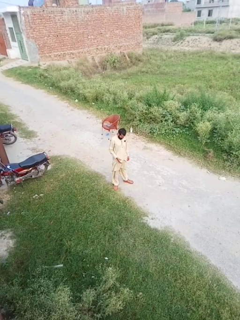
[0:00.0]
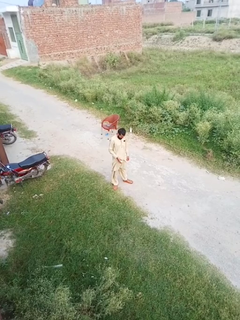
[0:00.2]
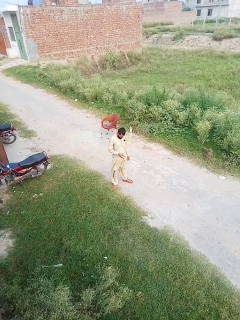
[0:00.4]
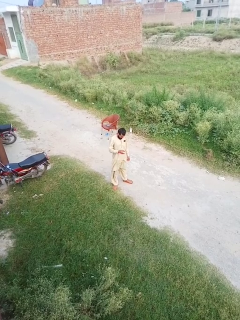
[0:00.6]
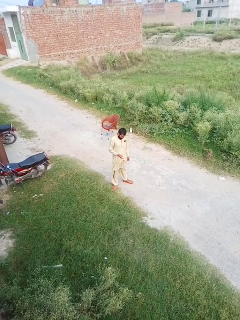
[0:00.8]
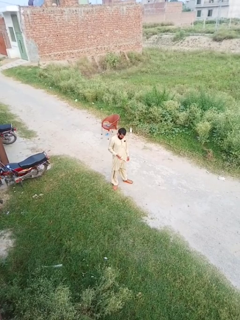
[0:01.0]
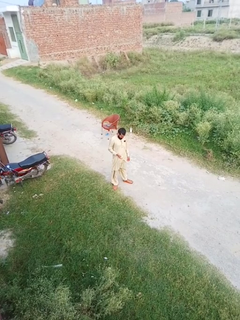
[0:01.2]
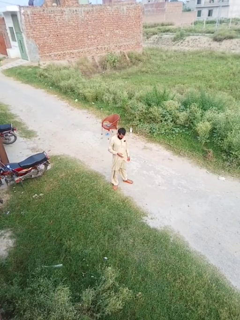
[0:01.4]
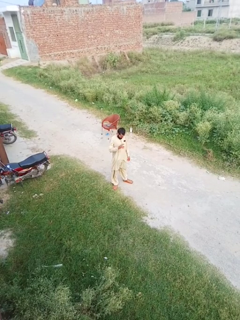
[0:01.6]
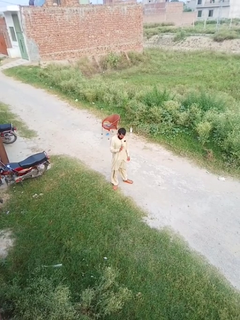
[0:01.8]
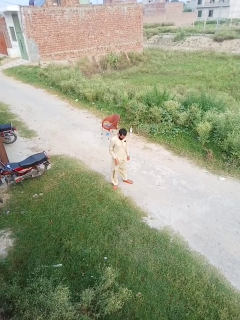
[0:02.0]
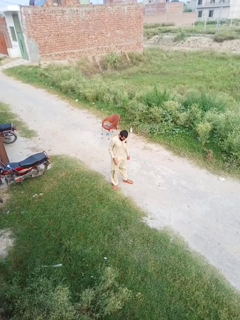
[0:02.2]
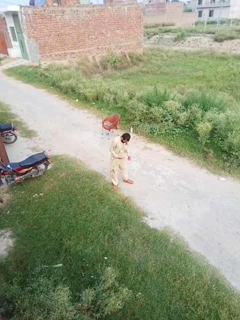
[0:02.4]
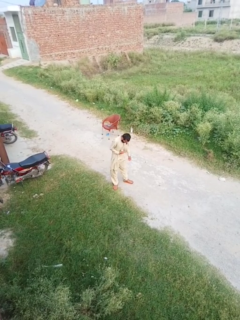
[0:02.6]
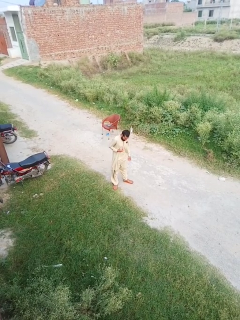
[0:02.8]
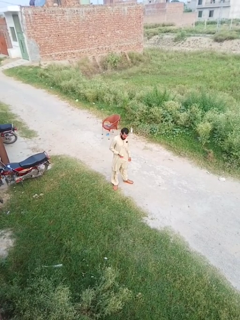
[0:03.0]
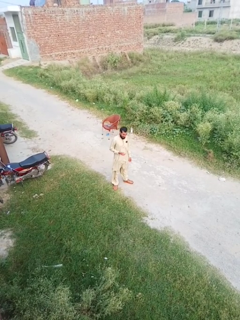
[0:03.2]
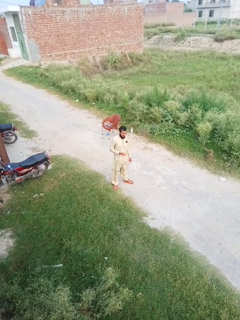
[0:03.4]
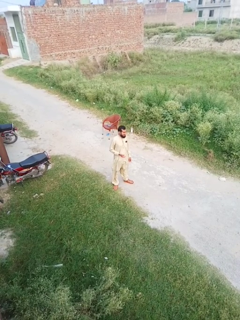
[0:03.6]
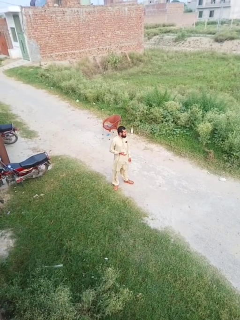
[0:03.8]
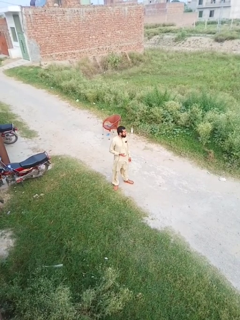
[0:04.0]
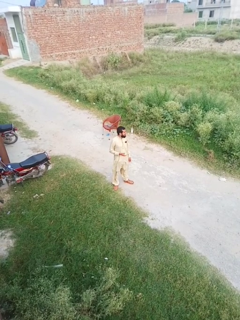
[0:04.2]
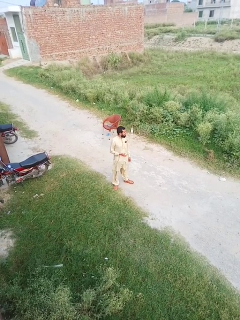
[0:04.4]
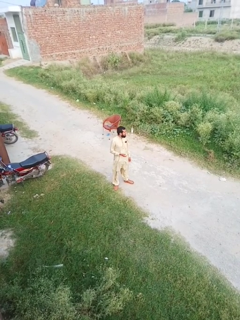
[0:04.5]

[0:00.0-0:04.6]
person bounces ball on floor

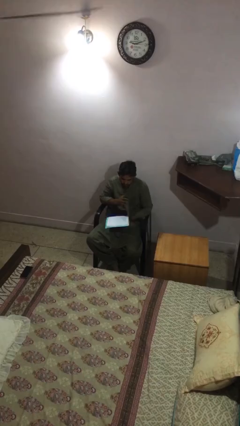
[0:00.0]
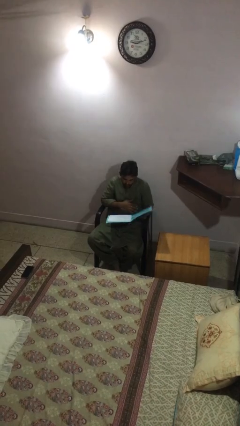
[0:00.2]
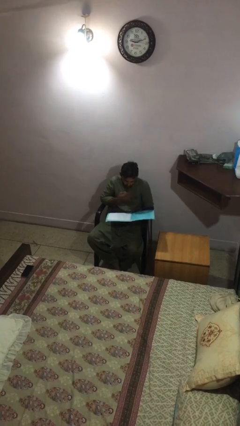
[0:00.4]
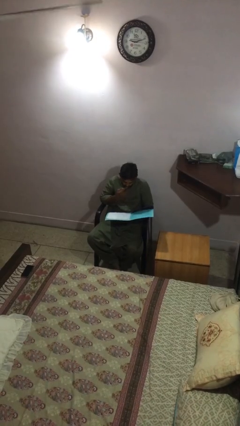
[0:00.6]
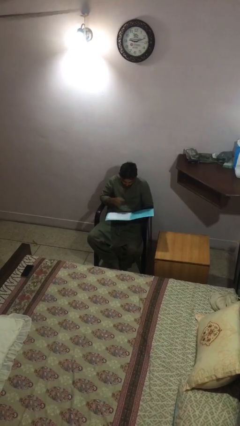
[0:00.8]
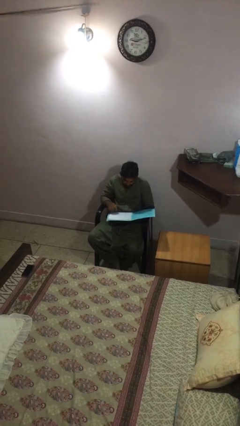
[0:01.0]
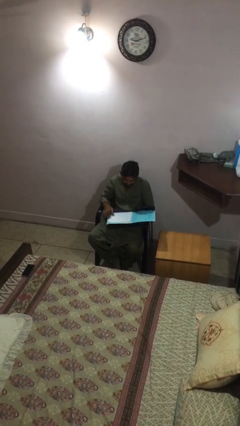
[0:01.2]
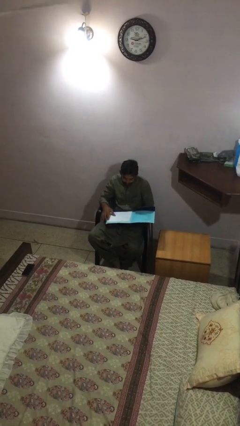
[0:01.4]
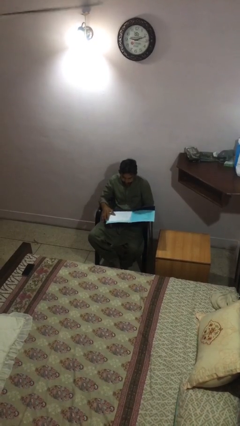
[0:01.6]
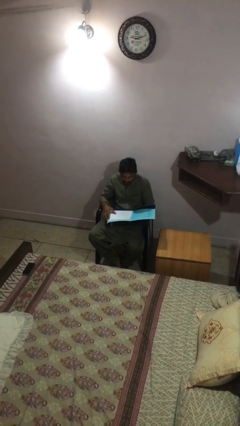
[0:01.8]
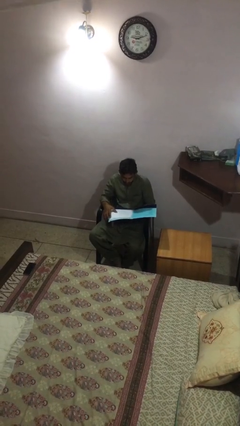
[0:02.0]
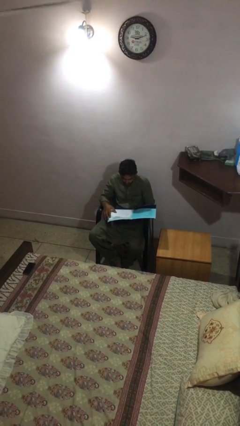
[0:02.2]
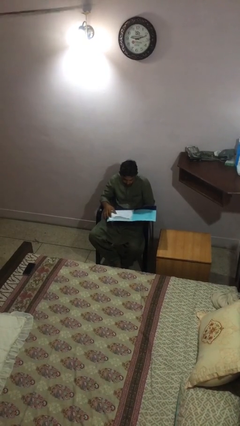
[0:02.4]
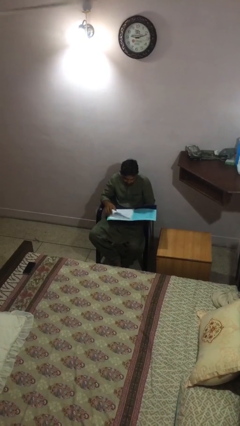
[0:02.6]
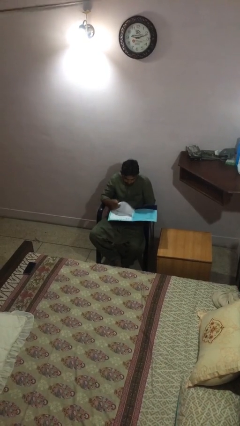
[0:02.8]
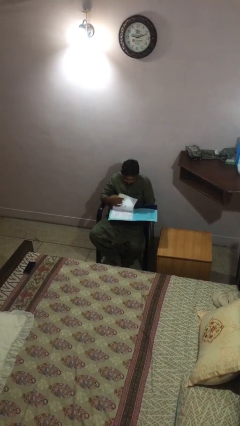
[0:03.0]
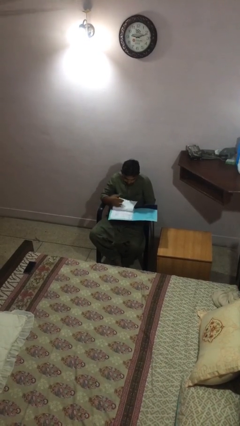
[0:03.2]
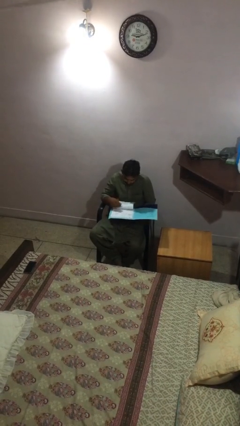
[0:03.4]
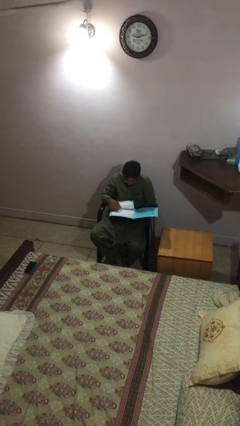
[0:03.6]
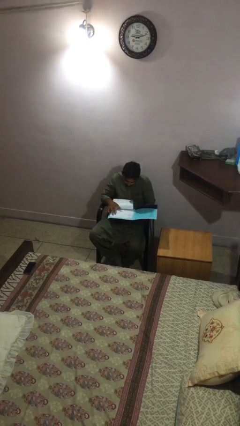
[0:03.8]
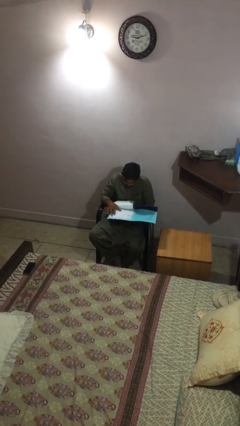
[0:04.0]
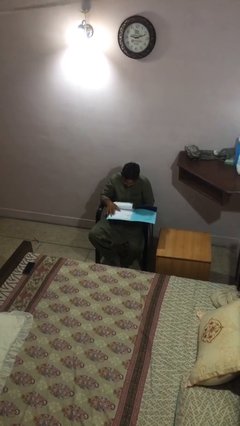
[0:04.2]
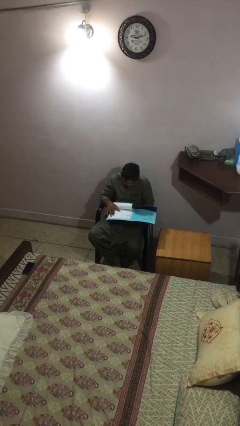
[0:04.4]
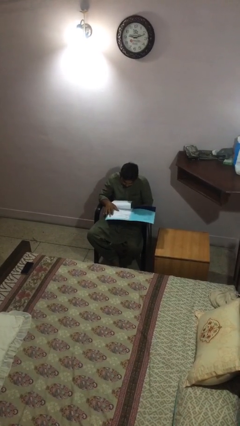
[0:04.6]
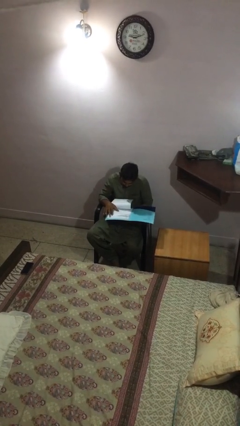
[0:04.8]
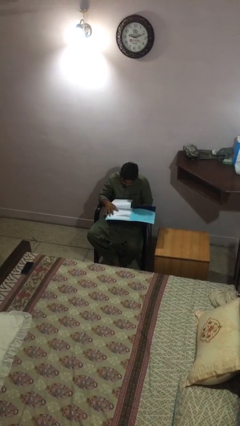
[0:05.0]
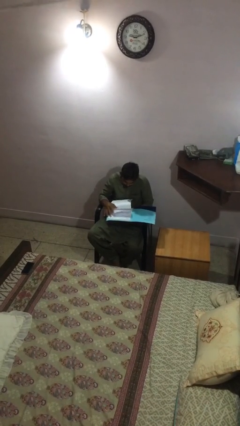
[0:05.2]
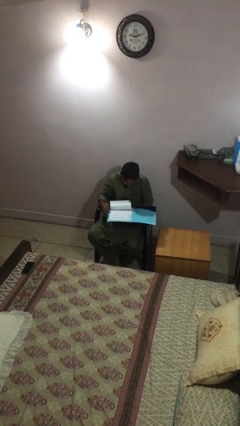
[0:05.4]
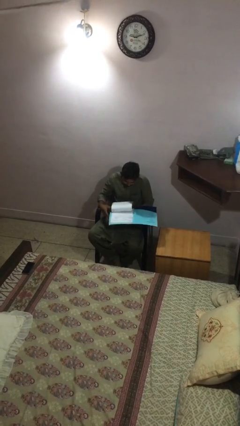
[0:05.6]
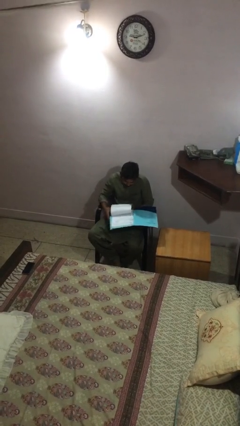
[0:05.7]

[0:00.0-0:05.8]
person reads document

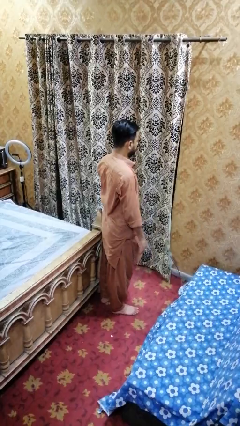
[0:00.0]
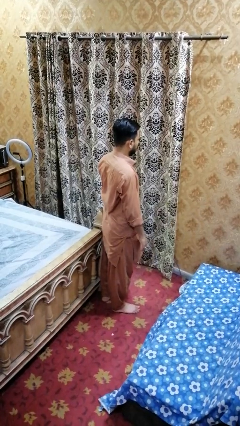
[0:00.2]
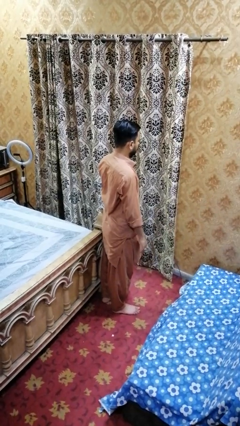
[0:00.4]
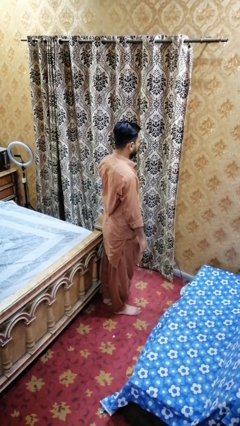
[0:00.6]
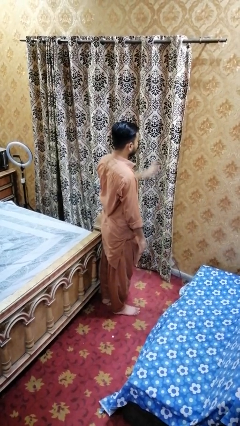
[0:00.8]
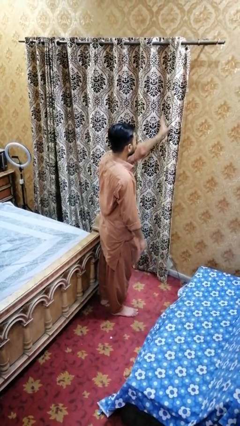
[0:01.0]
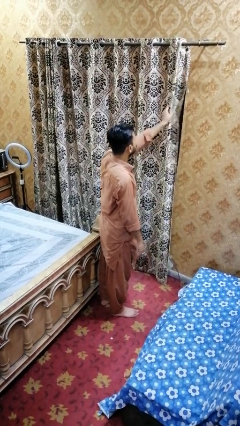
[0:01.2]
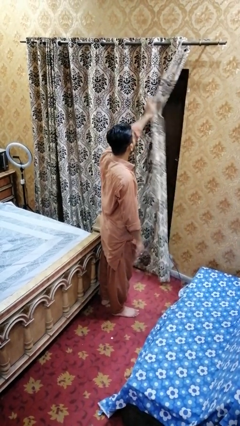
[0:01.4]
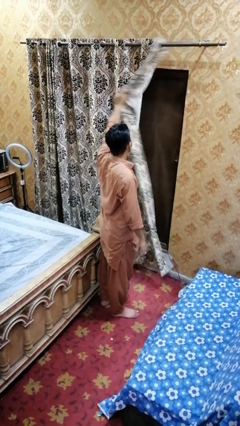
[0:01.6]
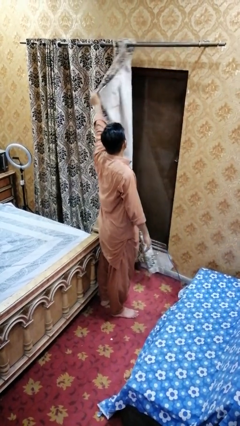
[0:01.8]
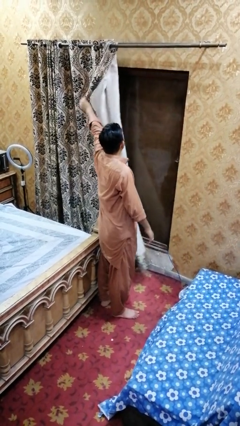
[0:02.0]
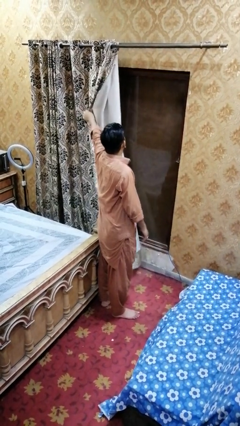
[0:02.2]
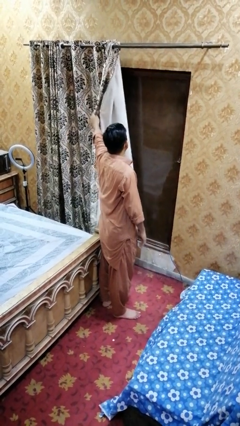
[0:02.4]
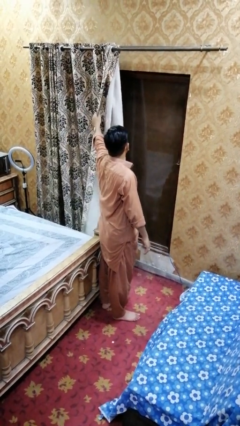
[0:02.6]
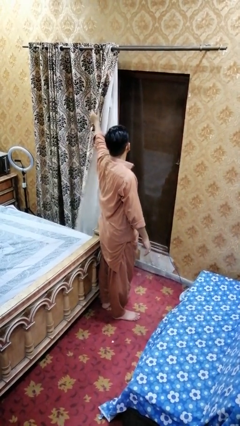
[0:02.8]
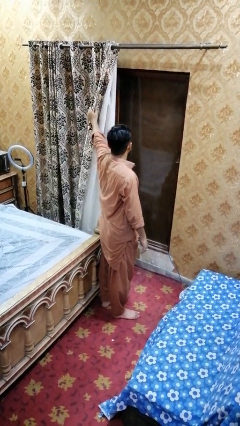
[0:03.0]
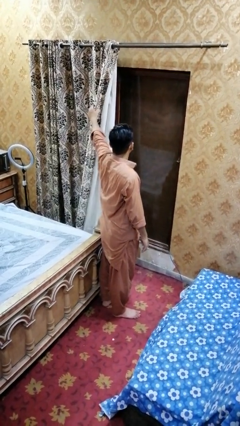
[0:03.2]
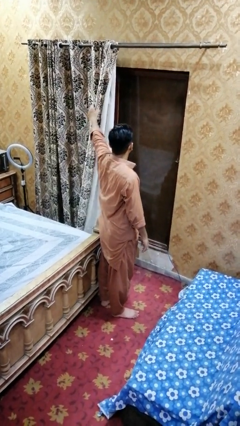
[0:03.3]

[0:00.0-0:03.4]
person opens curtains

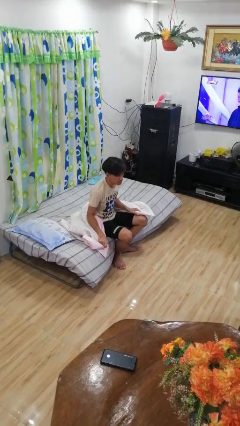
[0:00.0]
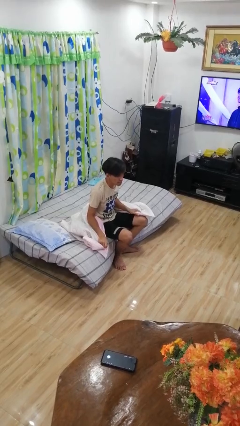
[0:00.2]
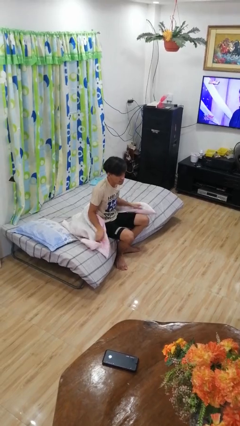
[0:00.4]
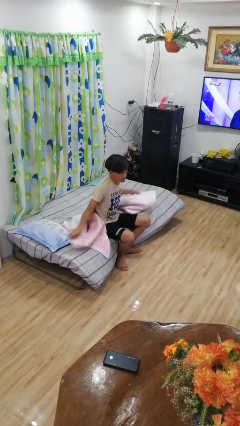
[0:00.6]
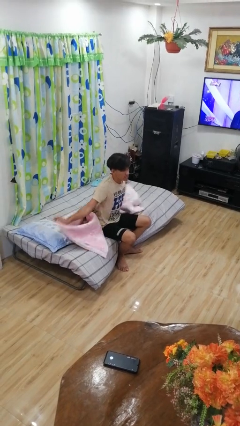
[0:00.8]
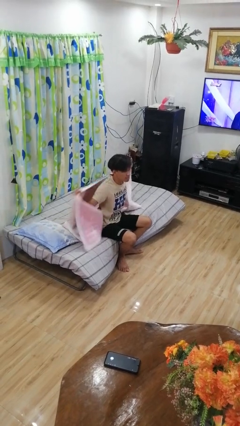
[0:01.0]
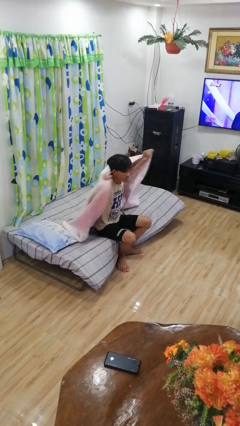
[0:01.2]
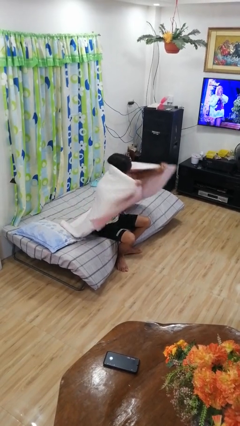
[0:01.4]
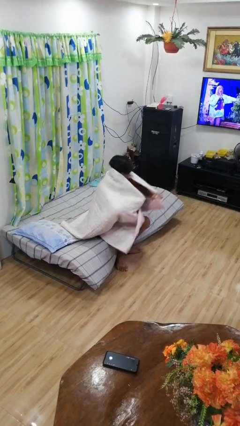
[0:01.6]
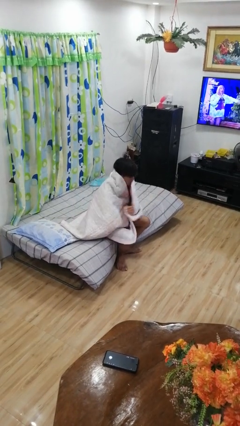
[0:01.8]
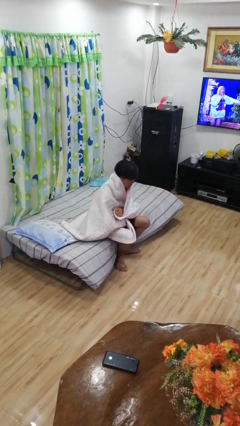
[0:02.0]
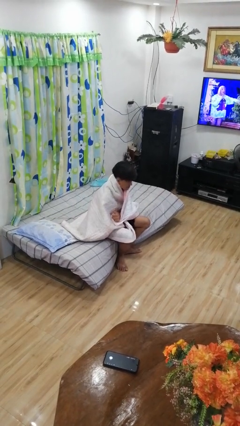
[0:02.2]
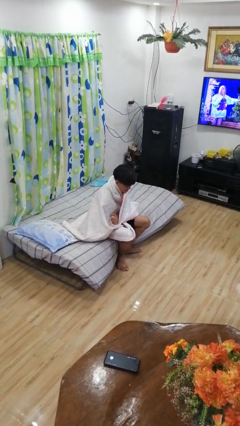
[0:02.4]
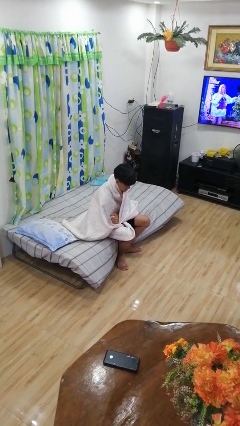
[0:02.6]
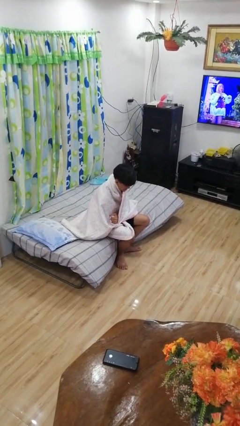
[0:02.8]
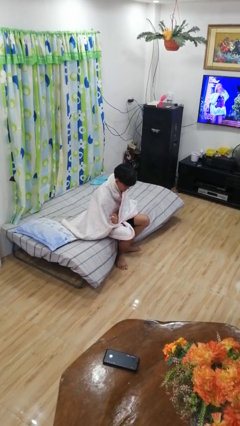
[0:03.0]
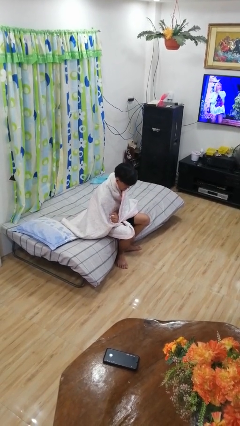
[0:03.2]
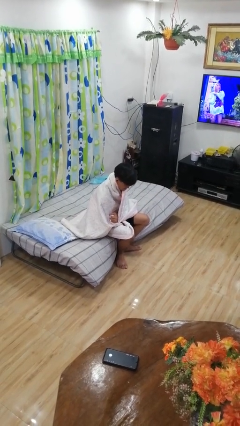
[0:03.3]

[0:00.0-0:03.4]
person covers with bedsheets

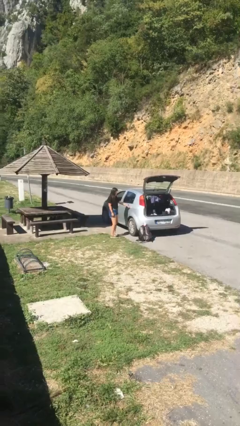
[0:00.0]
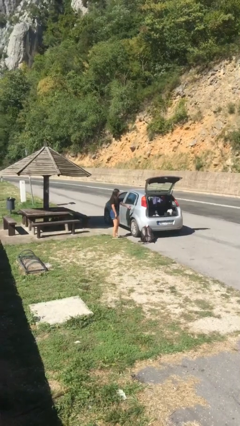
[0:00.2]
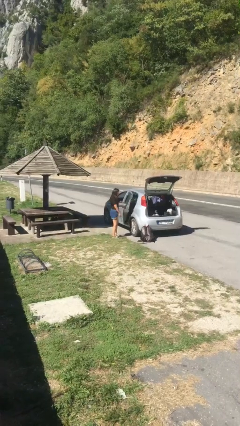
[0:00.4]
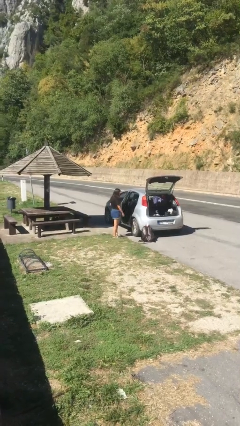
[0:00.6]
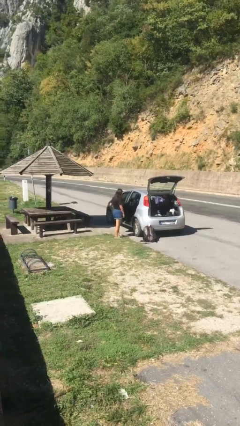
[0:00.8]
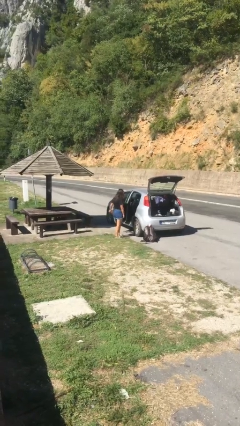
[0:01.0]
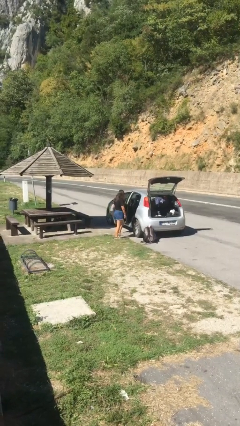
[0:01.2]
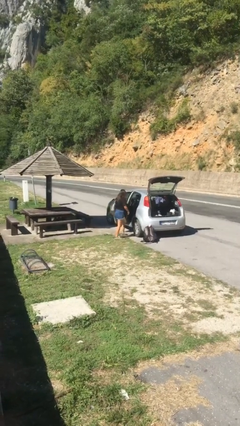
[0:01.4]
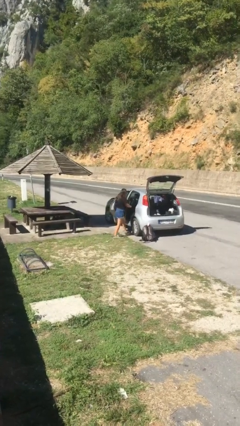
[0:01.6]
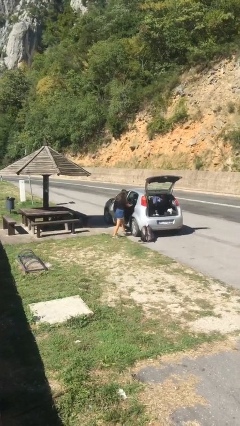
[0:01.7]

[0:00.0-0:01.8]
person opens car door
